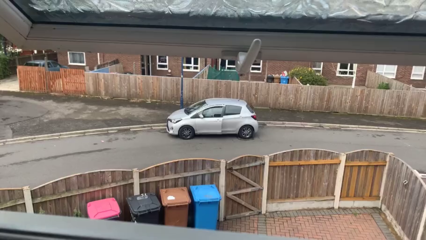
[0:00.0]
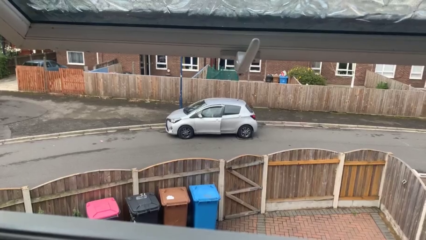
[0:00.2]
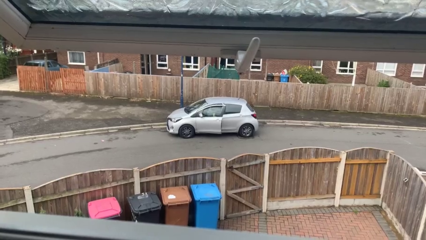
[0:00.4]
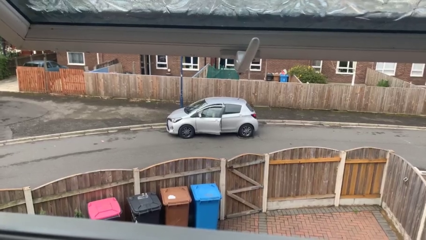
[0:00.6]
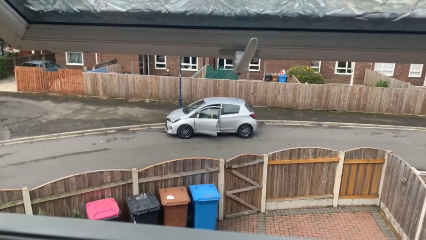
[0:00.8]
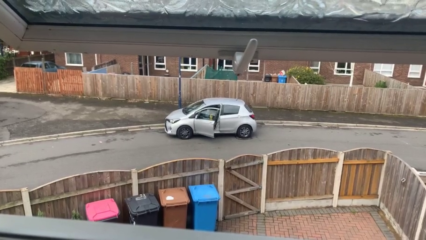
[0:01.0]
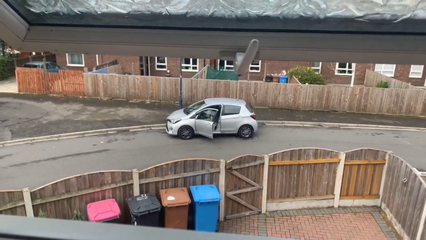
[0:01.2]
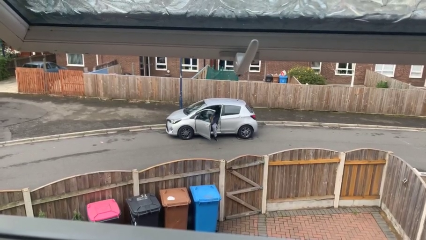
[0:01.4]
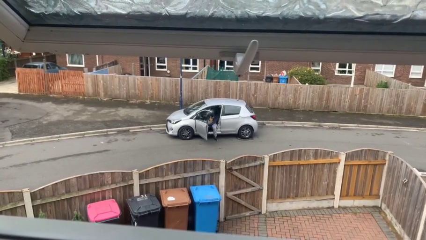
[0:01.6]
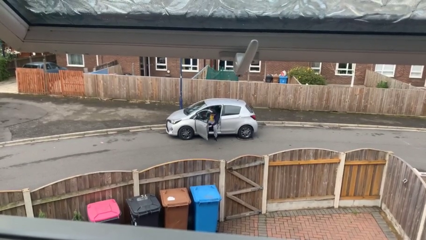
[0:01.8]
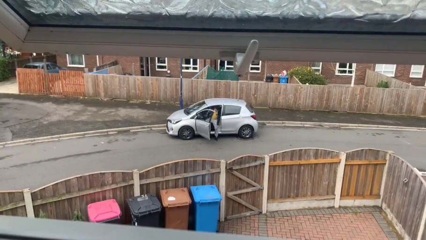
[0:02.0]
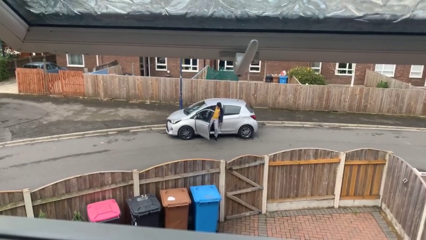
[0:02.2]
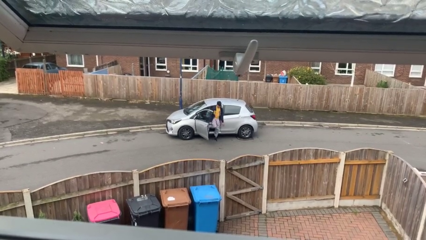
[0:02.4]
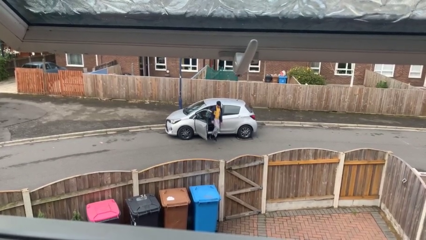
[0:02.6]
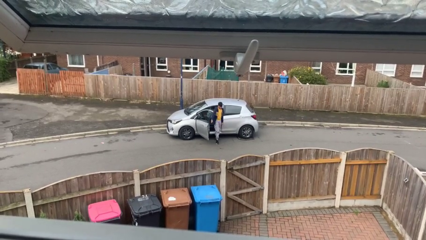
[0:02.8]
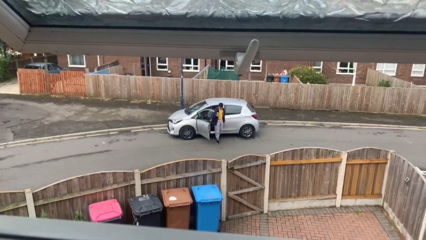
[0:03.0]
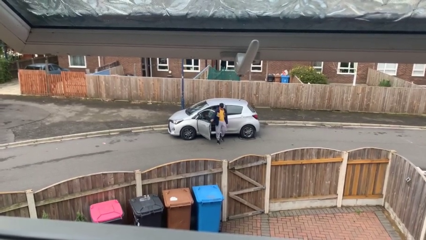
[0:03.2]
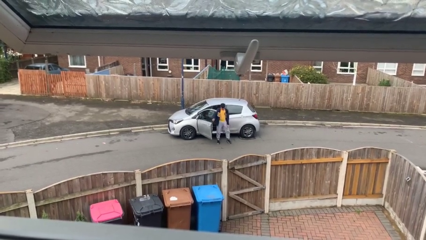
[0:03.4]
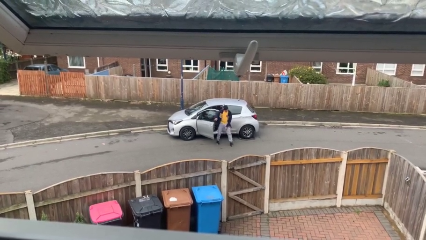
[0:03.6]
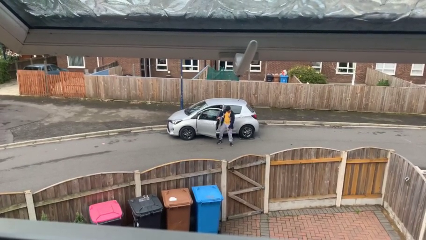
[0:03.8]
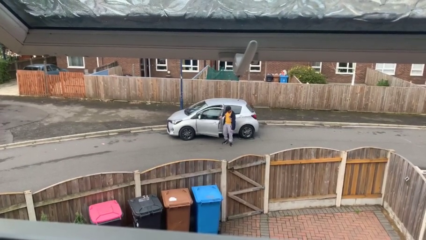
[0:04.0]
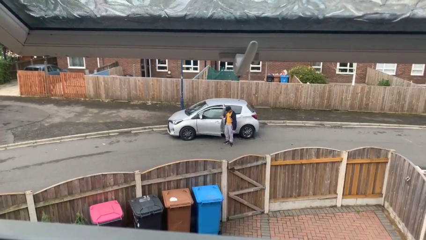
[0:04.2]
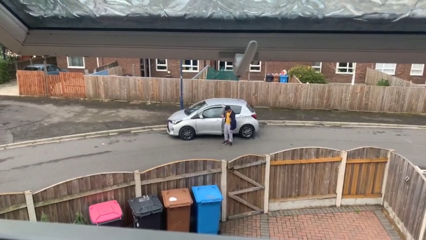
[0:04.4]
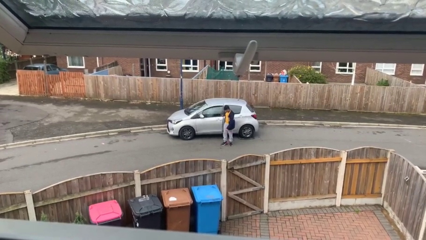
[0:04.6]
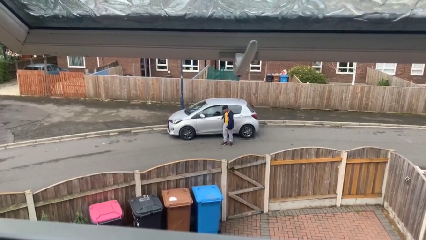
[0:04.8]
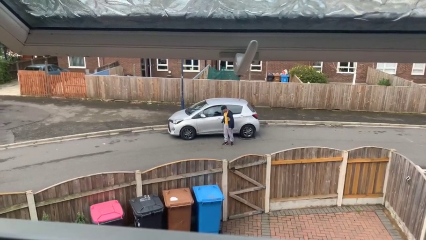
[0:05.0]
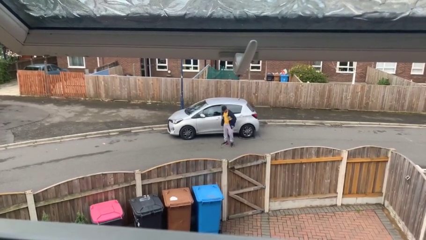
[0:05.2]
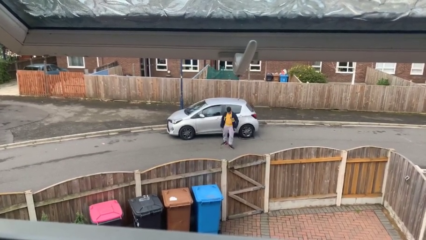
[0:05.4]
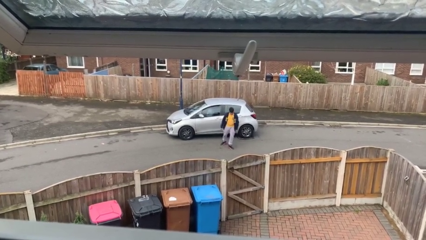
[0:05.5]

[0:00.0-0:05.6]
car drops off person

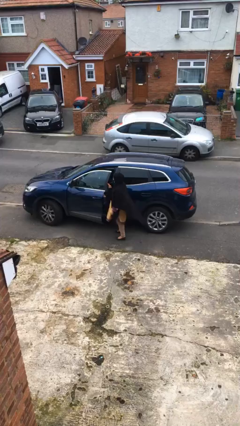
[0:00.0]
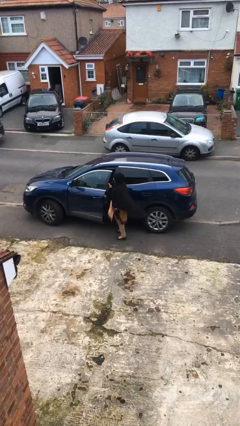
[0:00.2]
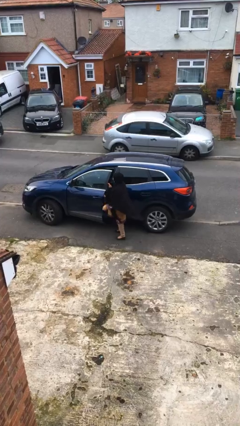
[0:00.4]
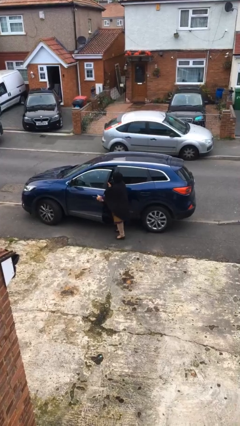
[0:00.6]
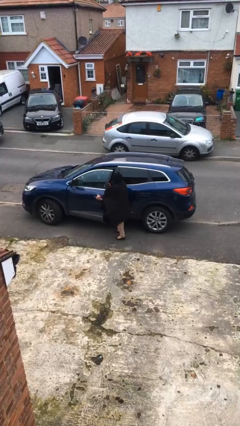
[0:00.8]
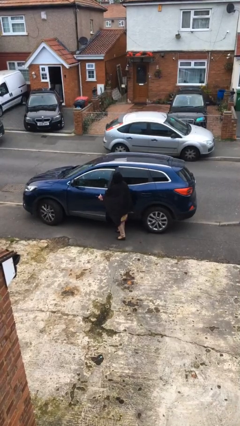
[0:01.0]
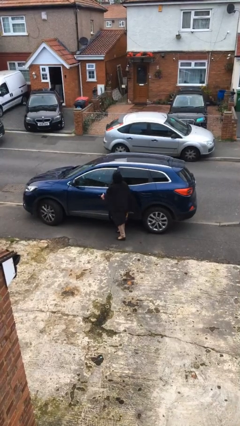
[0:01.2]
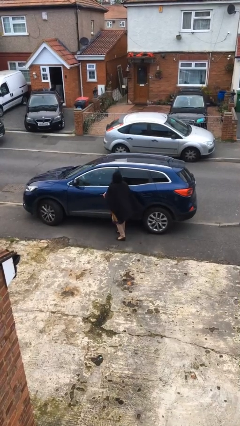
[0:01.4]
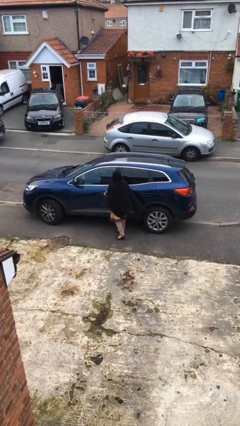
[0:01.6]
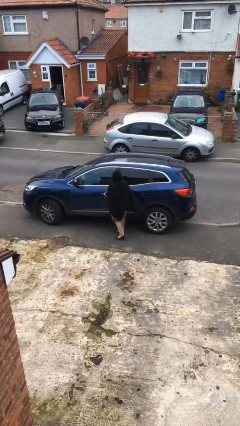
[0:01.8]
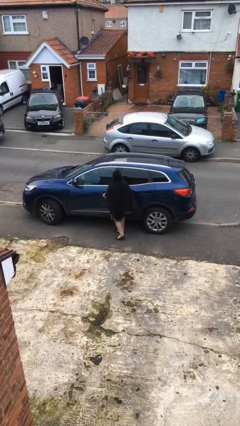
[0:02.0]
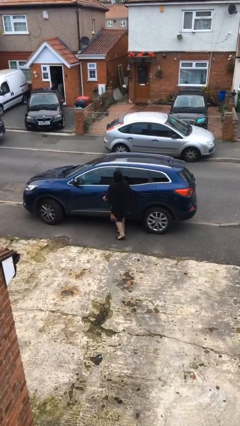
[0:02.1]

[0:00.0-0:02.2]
person closes car door

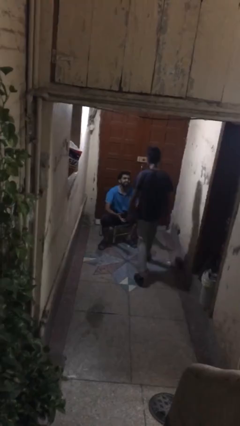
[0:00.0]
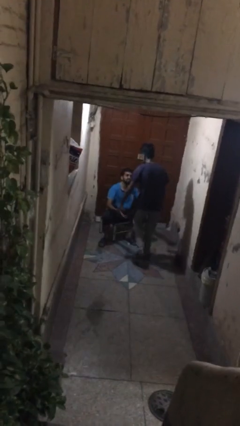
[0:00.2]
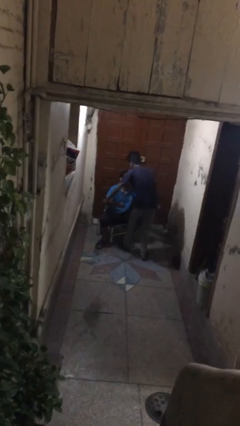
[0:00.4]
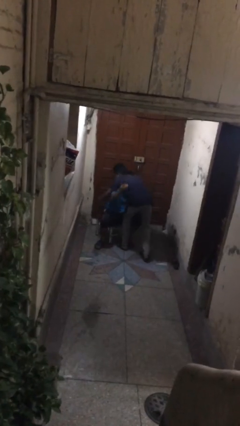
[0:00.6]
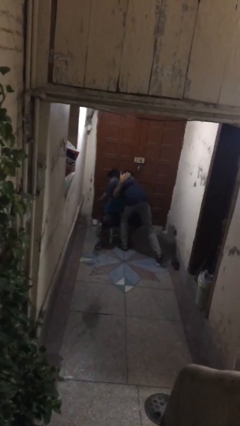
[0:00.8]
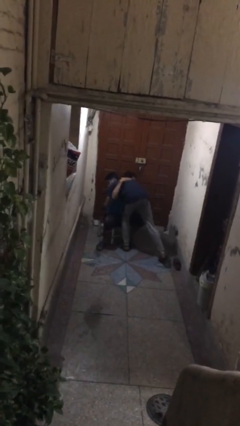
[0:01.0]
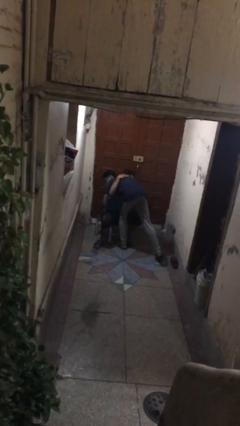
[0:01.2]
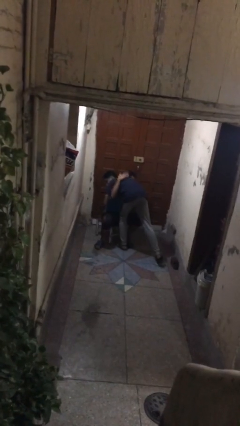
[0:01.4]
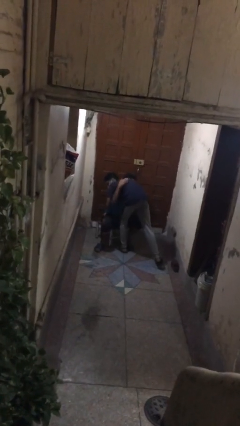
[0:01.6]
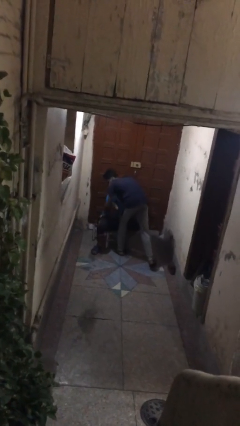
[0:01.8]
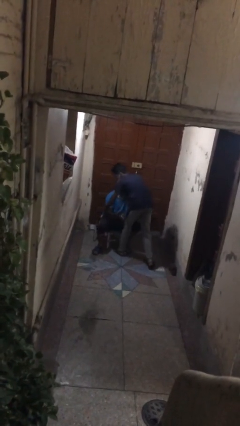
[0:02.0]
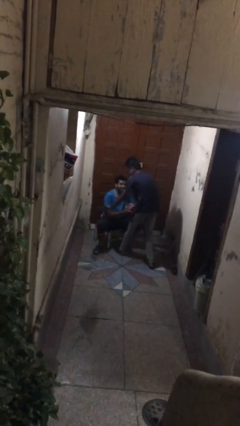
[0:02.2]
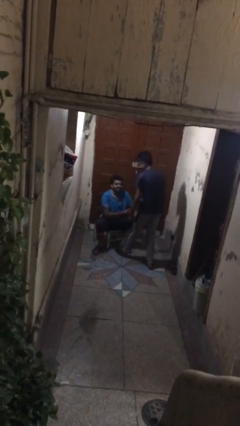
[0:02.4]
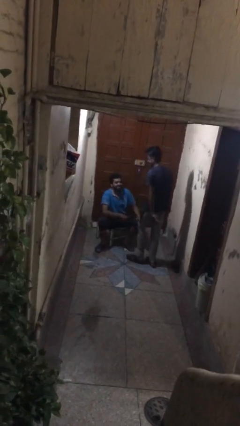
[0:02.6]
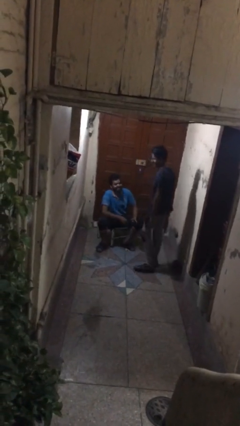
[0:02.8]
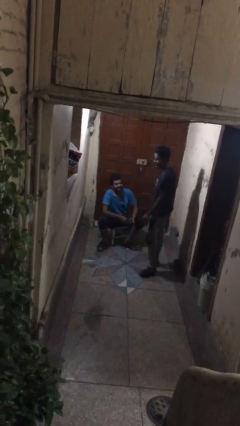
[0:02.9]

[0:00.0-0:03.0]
person embraces person

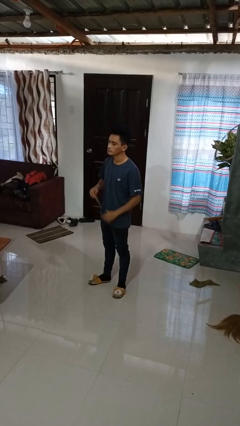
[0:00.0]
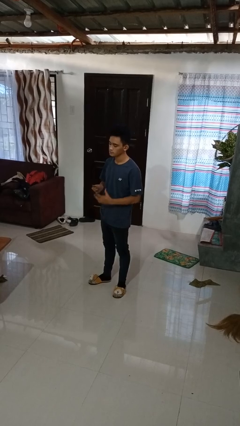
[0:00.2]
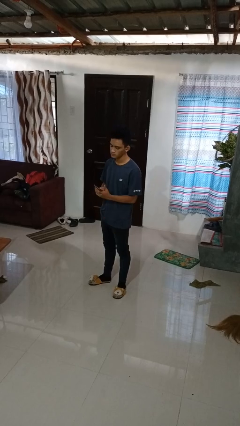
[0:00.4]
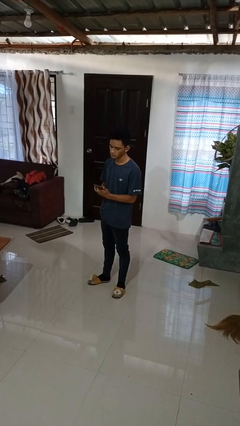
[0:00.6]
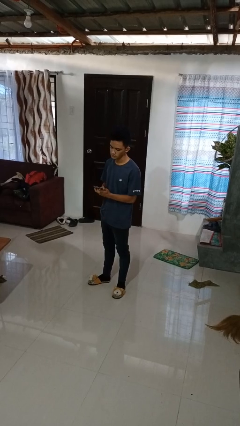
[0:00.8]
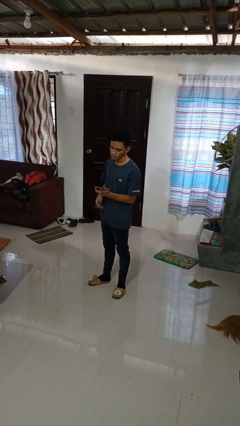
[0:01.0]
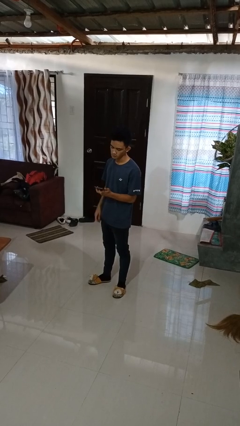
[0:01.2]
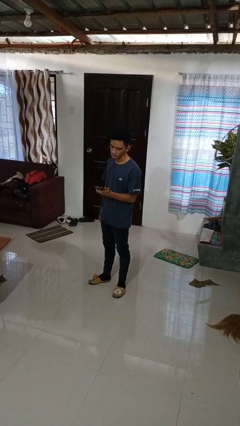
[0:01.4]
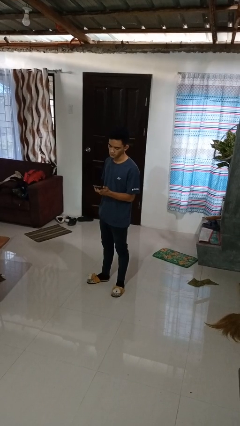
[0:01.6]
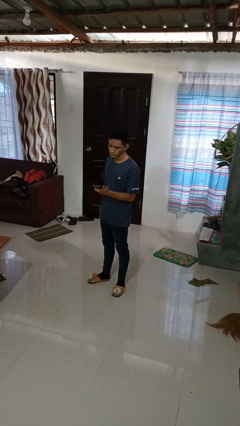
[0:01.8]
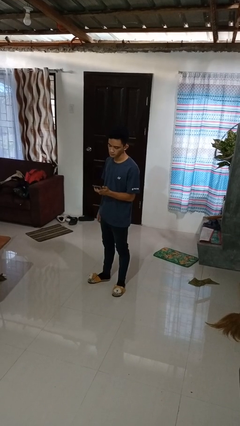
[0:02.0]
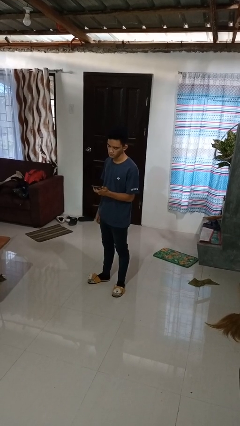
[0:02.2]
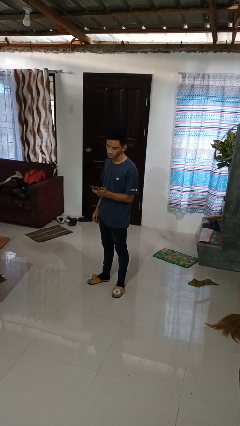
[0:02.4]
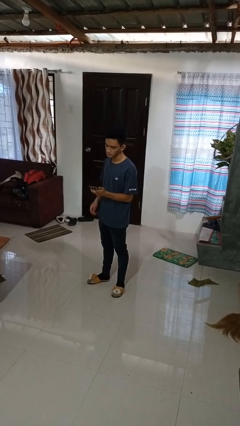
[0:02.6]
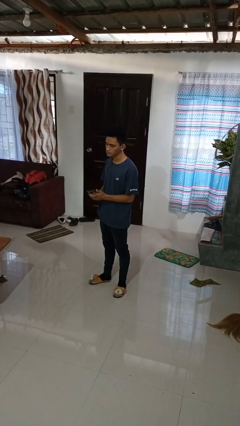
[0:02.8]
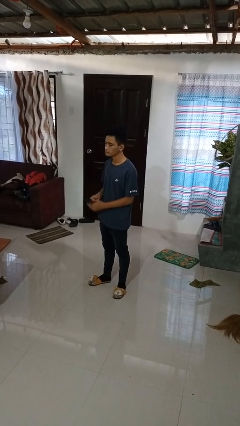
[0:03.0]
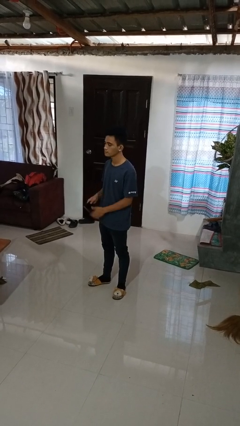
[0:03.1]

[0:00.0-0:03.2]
person takes phone from pocket

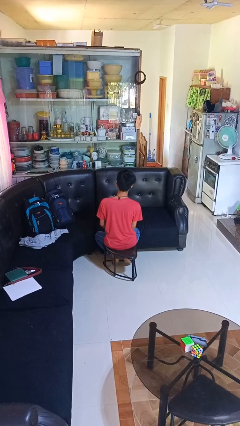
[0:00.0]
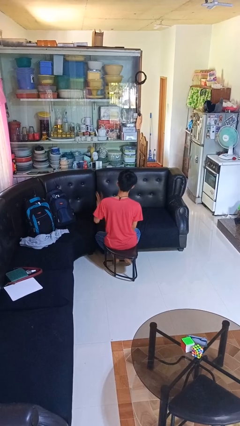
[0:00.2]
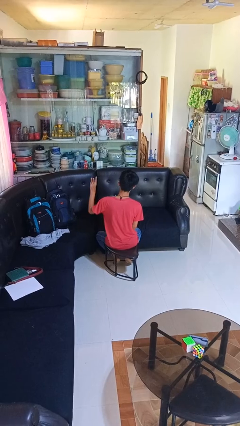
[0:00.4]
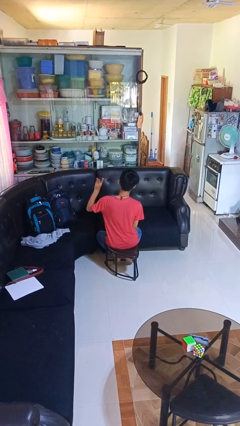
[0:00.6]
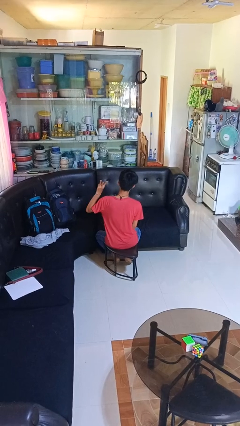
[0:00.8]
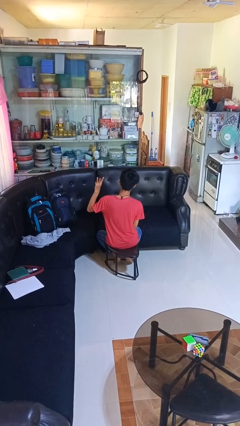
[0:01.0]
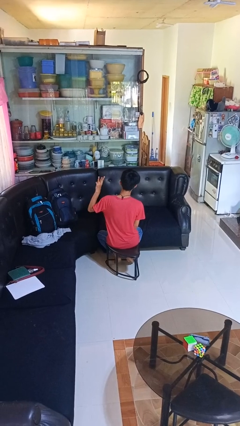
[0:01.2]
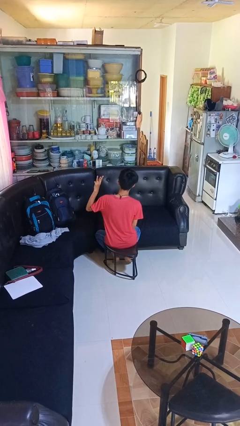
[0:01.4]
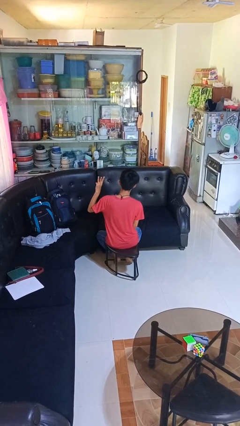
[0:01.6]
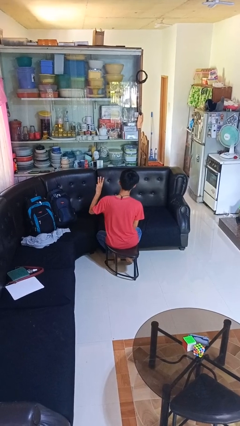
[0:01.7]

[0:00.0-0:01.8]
person gestures number three

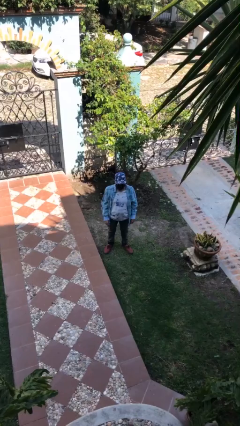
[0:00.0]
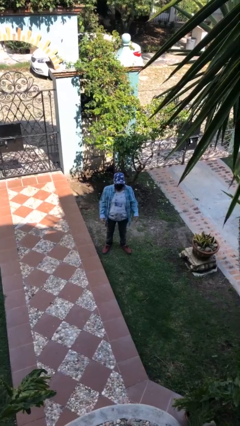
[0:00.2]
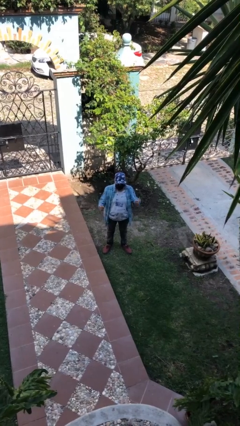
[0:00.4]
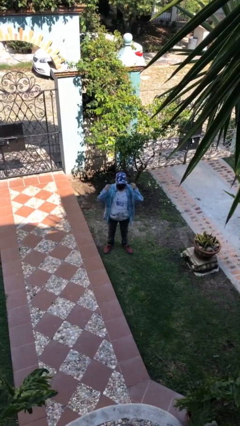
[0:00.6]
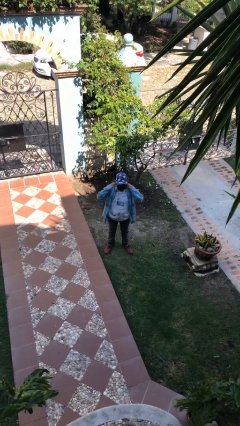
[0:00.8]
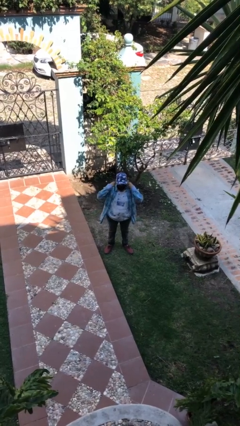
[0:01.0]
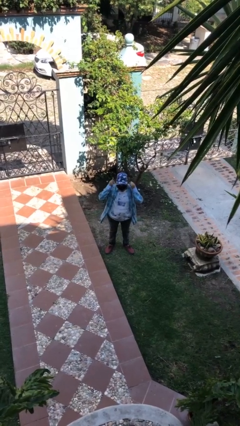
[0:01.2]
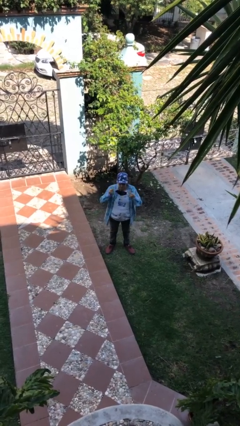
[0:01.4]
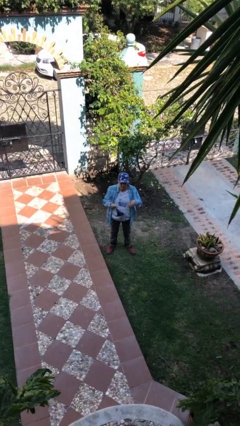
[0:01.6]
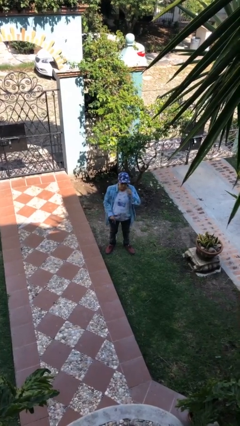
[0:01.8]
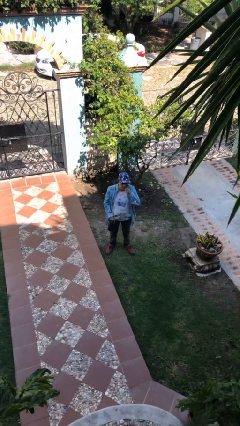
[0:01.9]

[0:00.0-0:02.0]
person takes off facemask
